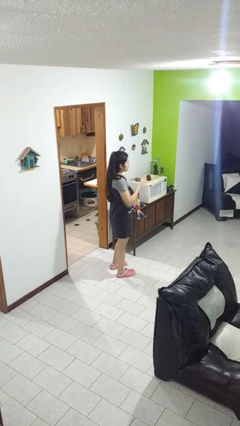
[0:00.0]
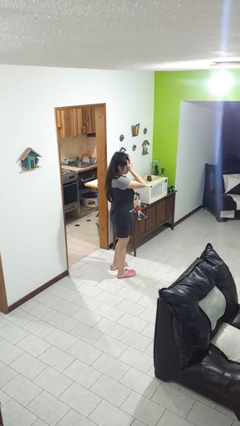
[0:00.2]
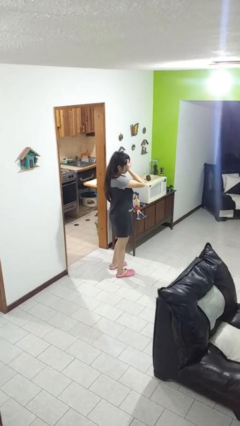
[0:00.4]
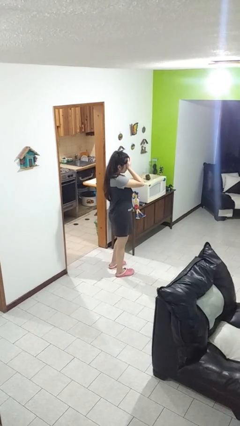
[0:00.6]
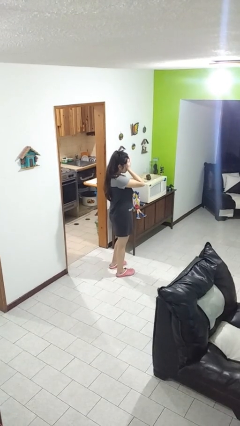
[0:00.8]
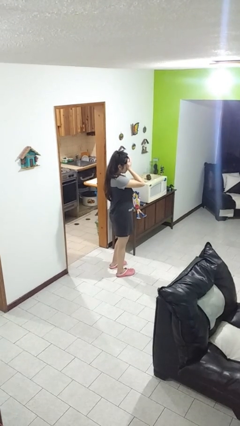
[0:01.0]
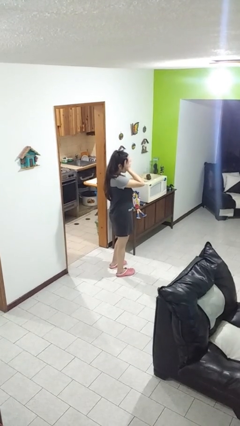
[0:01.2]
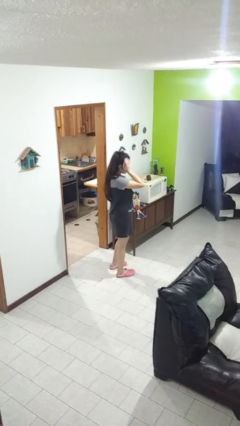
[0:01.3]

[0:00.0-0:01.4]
person rubs eyes

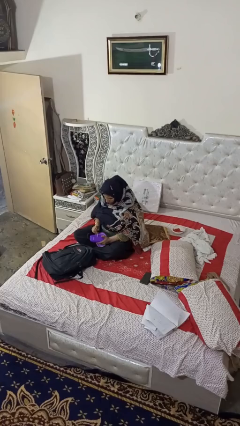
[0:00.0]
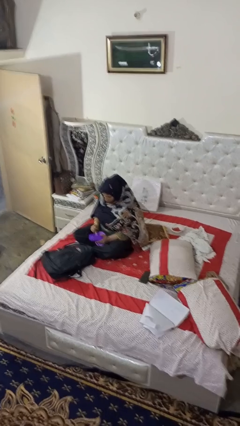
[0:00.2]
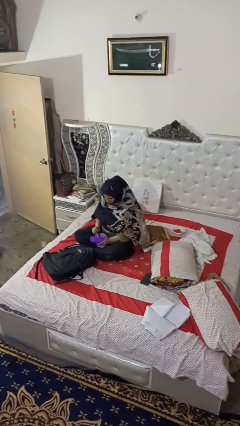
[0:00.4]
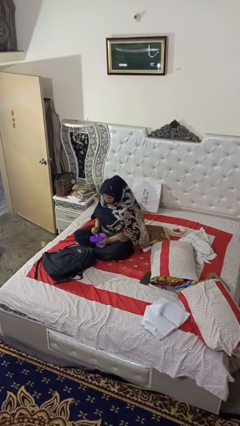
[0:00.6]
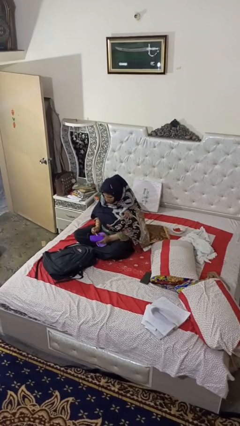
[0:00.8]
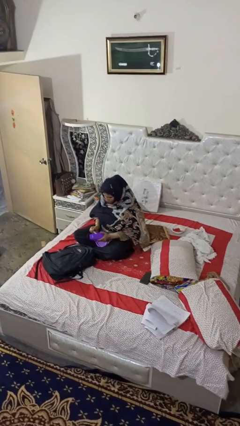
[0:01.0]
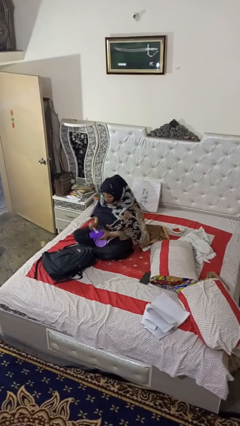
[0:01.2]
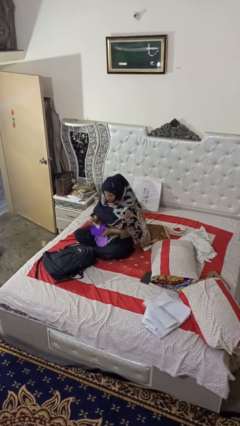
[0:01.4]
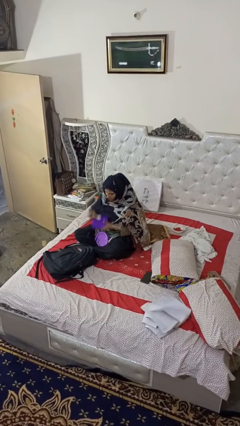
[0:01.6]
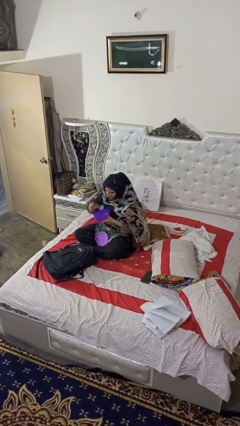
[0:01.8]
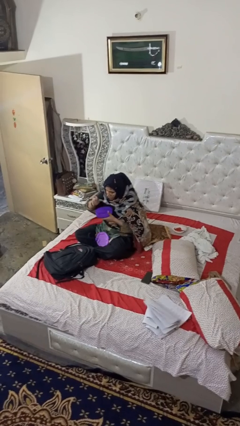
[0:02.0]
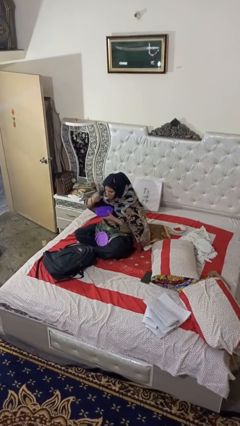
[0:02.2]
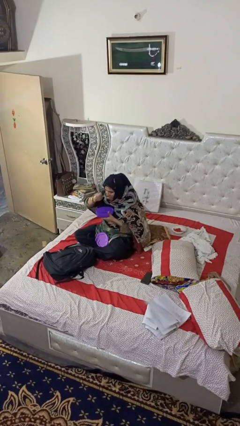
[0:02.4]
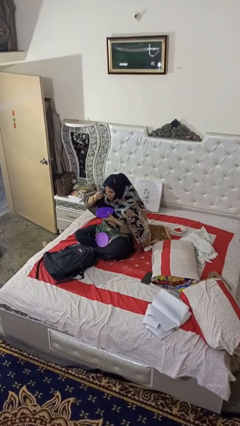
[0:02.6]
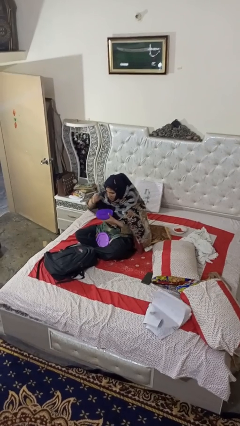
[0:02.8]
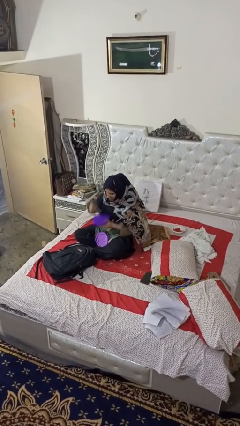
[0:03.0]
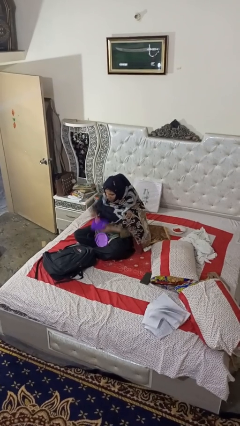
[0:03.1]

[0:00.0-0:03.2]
person eats snack from bag

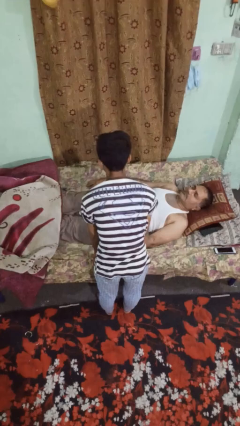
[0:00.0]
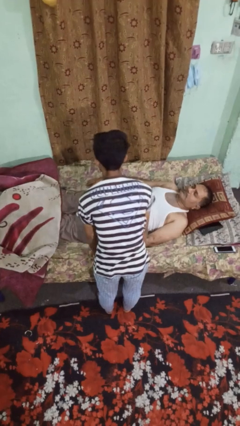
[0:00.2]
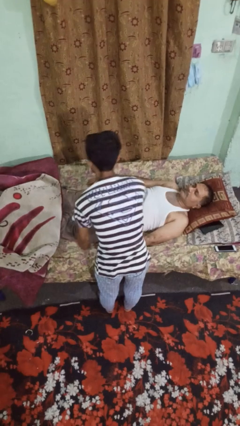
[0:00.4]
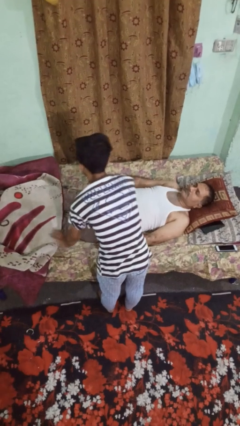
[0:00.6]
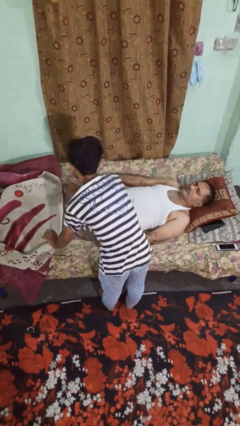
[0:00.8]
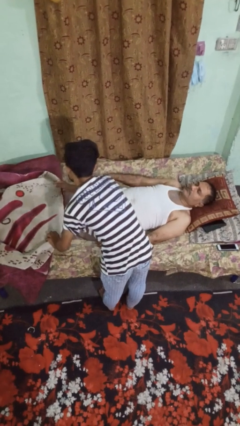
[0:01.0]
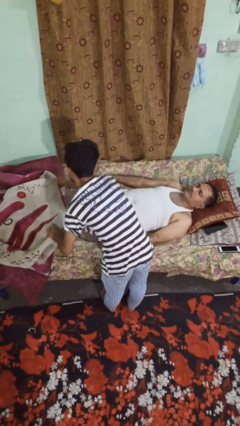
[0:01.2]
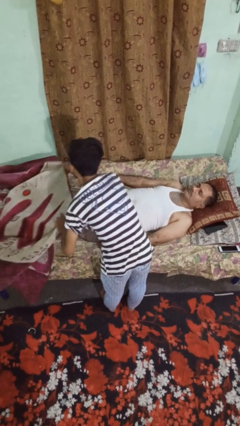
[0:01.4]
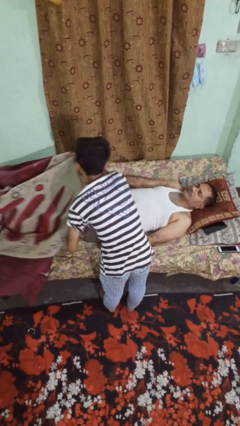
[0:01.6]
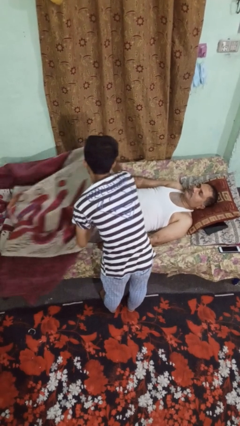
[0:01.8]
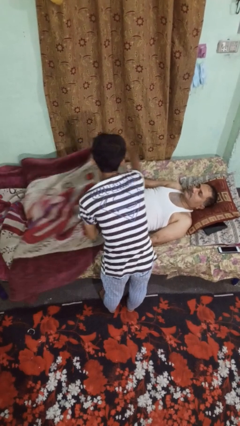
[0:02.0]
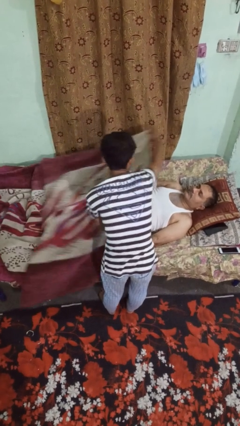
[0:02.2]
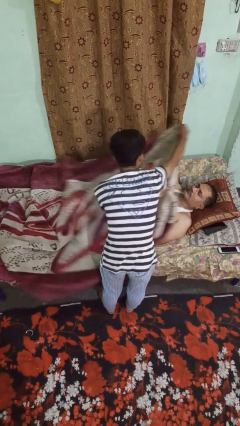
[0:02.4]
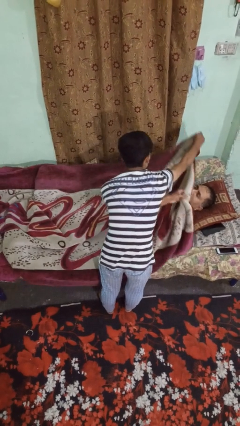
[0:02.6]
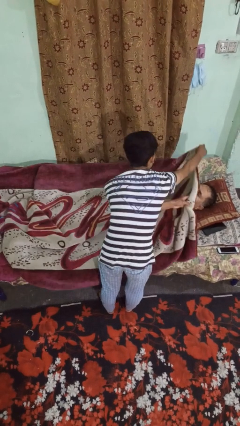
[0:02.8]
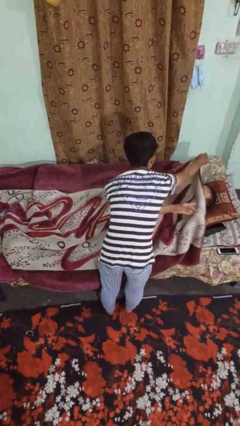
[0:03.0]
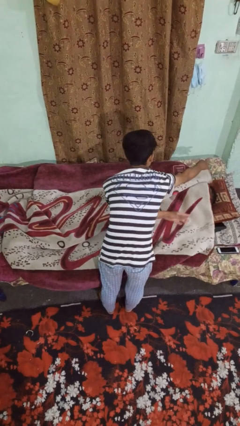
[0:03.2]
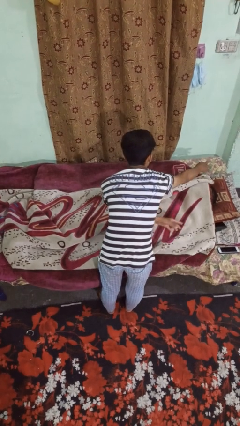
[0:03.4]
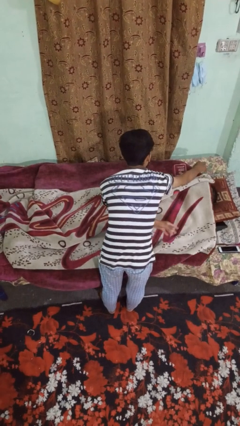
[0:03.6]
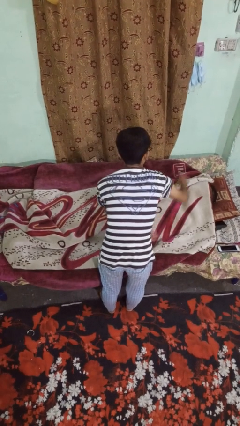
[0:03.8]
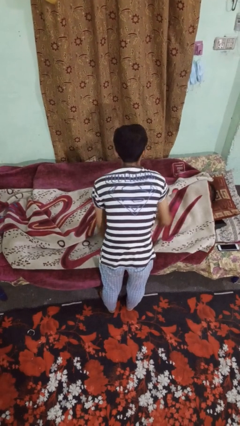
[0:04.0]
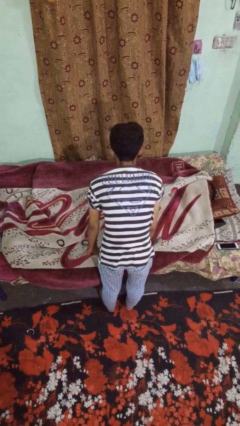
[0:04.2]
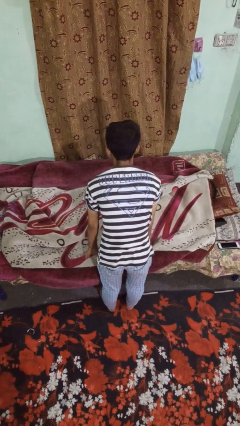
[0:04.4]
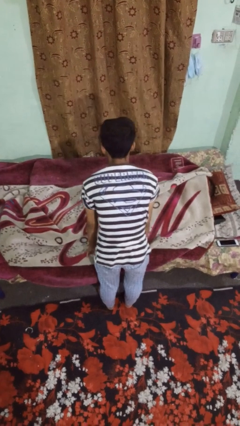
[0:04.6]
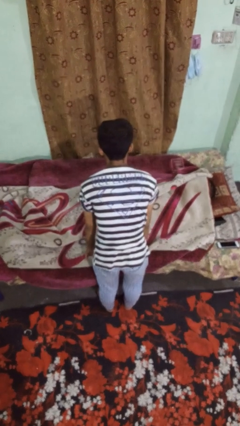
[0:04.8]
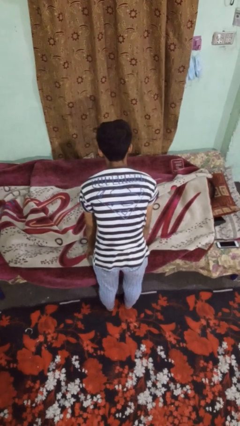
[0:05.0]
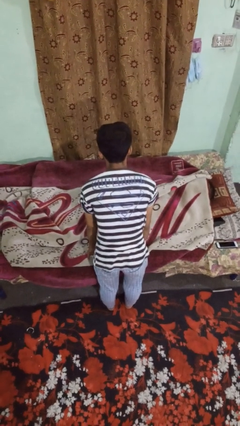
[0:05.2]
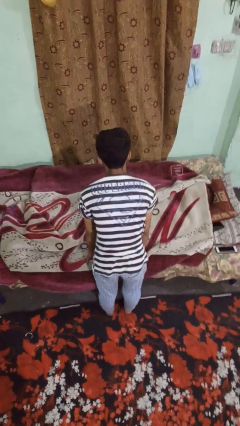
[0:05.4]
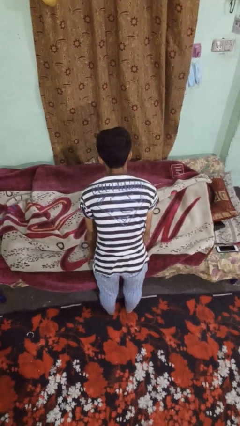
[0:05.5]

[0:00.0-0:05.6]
person covers friend with blanket

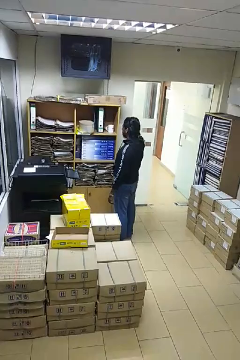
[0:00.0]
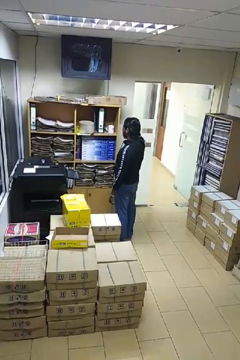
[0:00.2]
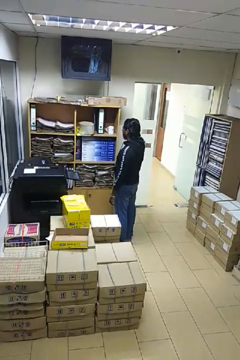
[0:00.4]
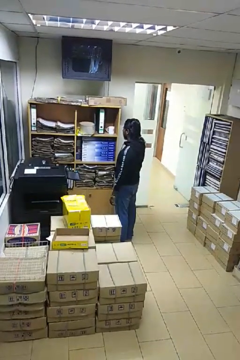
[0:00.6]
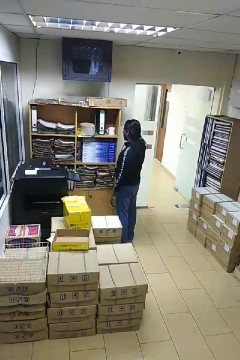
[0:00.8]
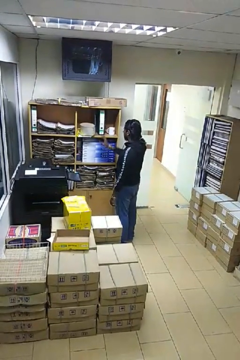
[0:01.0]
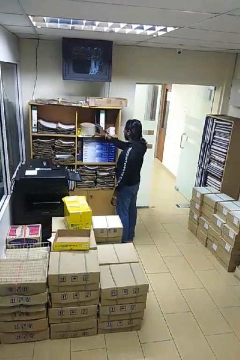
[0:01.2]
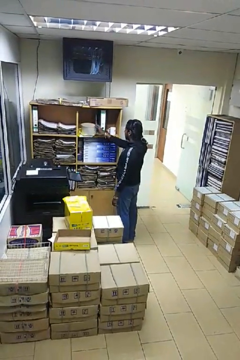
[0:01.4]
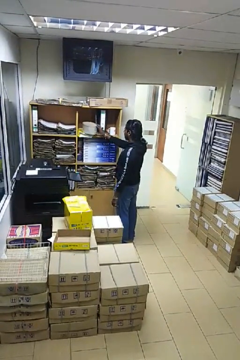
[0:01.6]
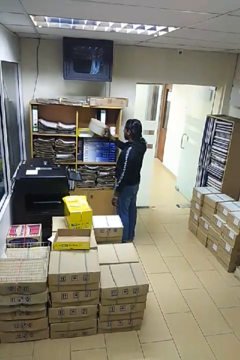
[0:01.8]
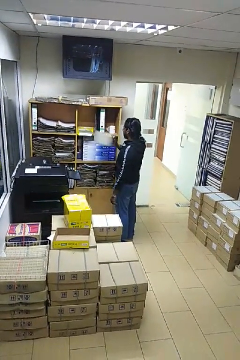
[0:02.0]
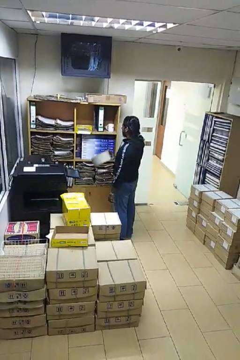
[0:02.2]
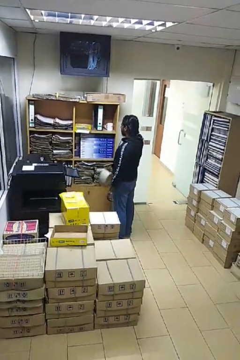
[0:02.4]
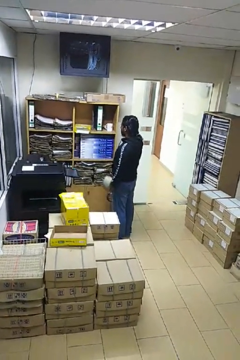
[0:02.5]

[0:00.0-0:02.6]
person picks up object from cabinet

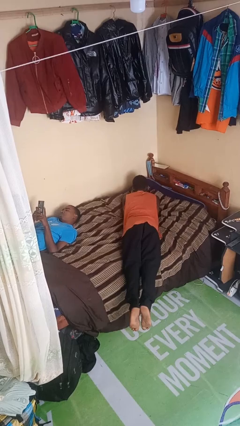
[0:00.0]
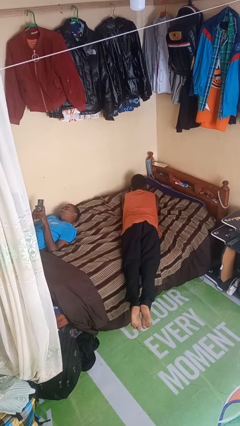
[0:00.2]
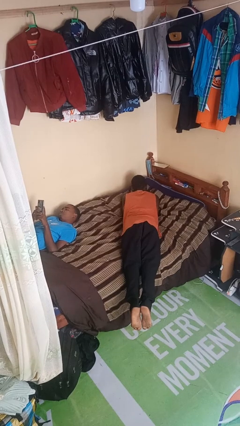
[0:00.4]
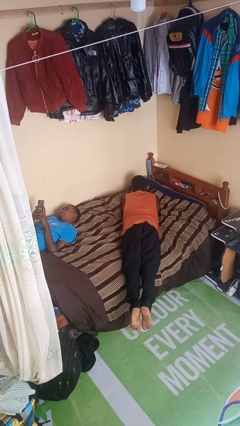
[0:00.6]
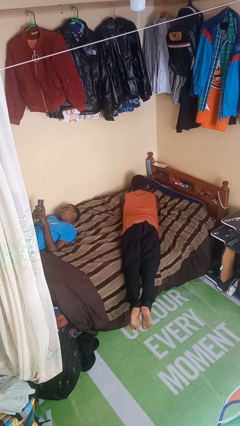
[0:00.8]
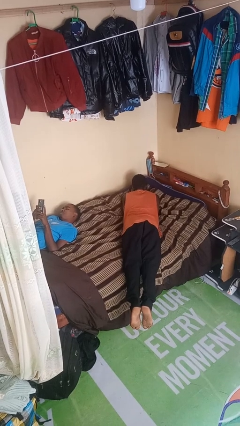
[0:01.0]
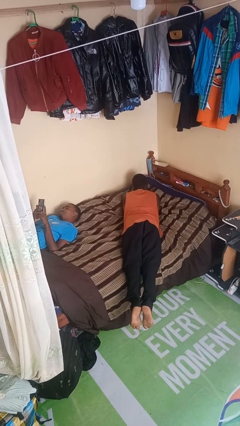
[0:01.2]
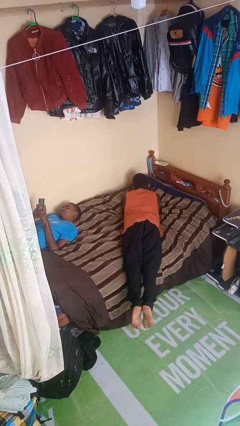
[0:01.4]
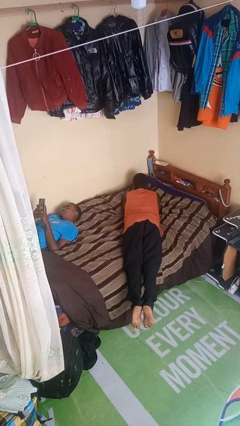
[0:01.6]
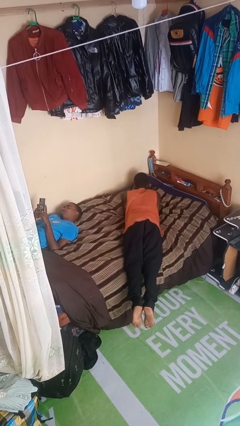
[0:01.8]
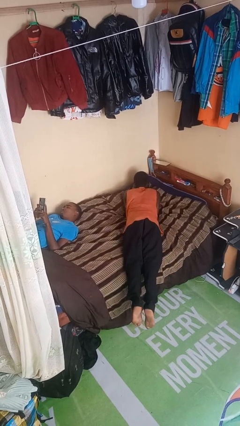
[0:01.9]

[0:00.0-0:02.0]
person lies down on bed

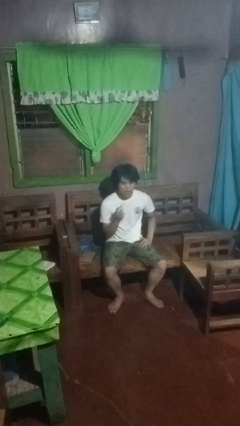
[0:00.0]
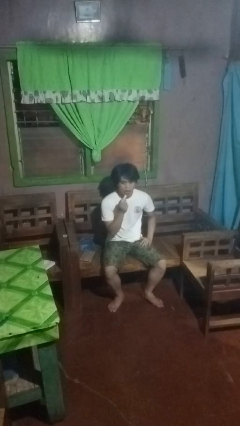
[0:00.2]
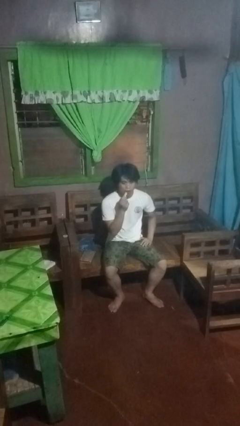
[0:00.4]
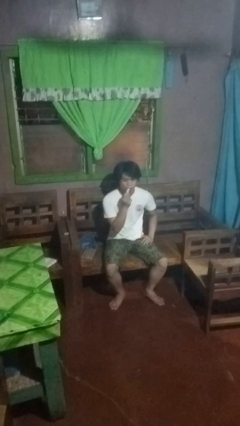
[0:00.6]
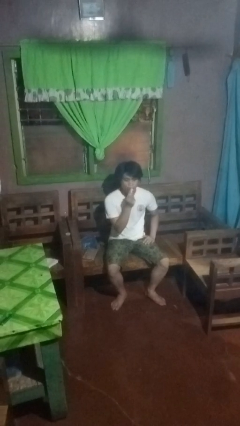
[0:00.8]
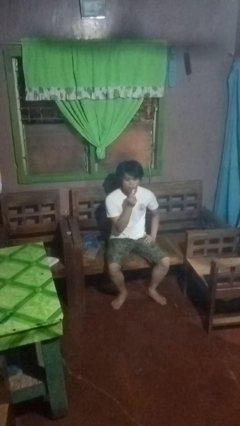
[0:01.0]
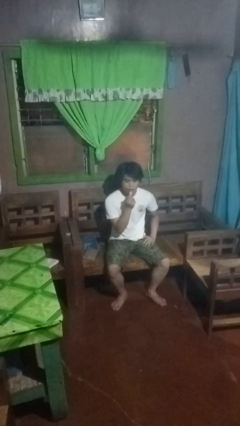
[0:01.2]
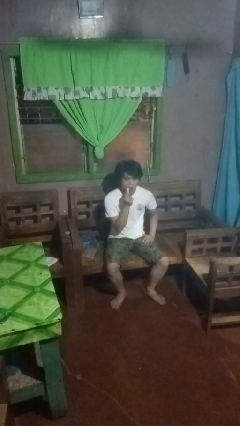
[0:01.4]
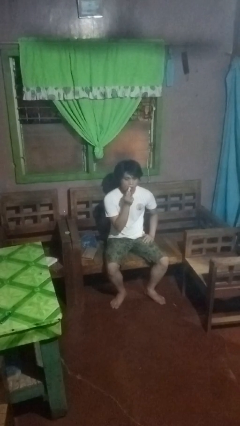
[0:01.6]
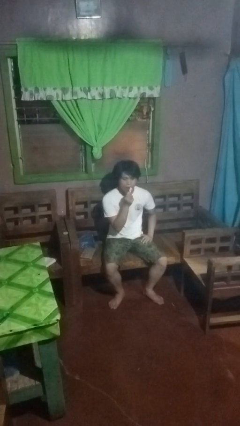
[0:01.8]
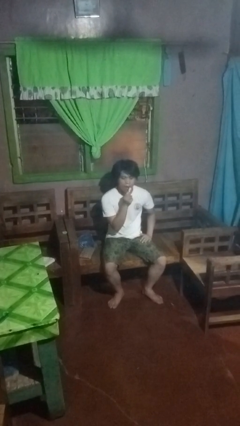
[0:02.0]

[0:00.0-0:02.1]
person applies lip makeup

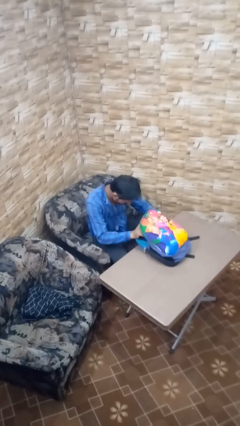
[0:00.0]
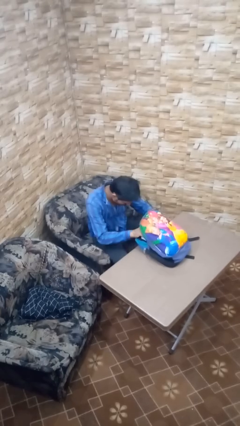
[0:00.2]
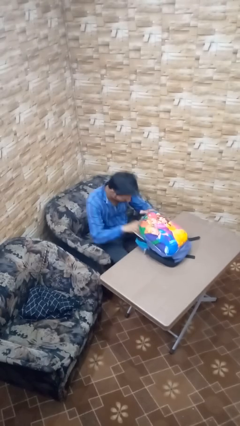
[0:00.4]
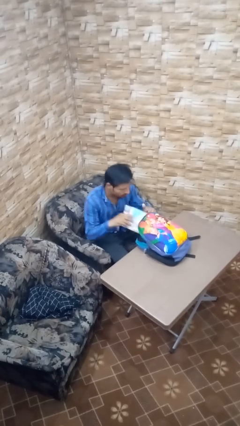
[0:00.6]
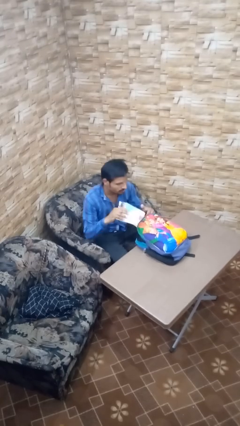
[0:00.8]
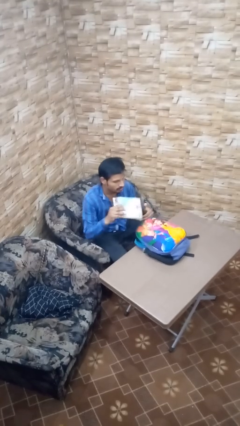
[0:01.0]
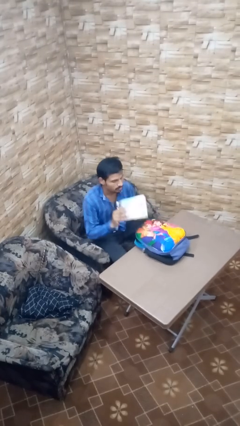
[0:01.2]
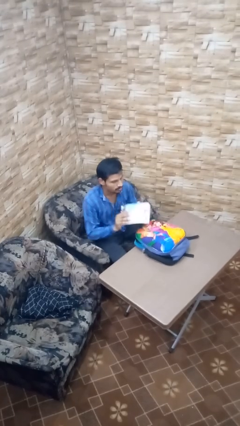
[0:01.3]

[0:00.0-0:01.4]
person takes object from backpack
